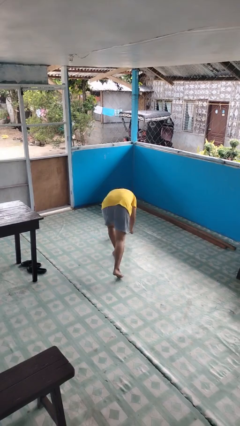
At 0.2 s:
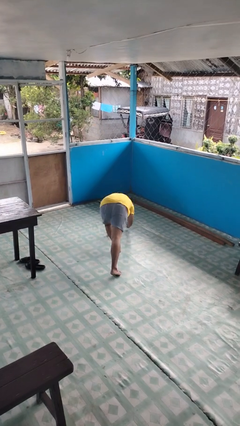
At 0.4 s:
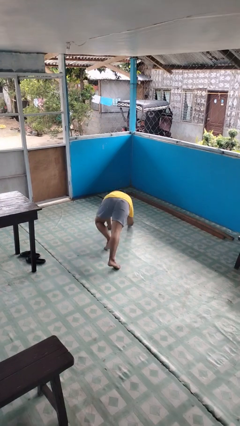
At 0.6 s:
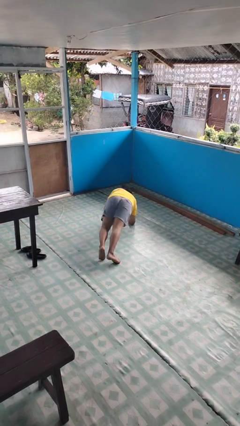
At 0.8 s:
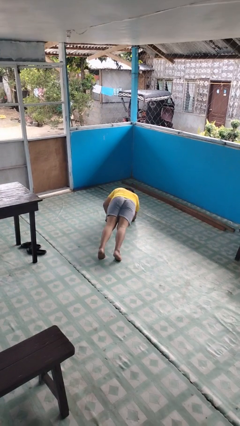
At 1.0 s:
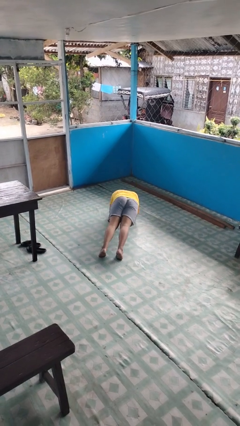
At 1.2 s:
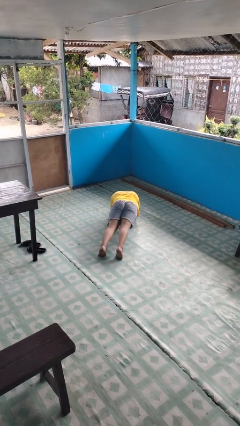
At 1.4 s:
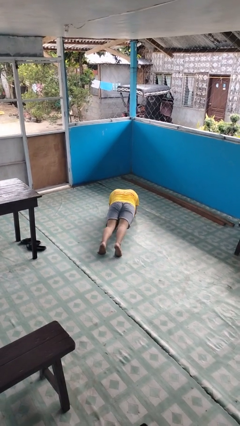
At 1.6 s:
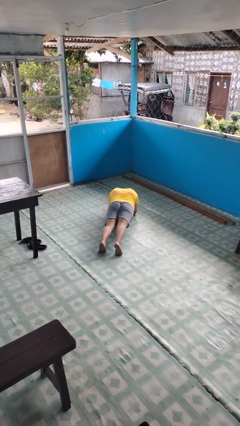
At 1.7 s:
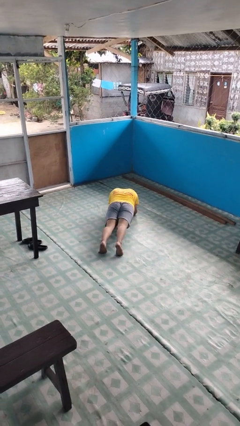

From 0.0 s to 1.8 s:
person exercises with plank

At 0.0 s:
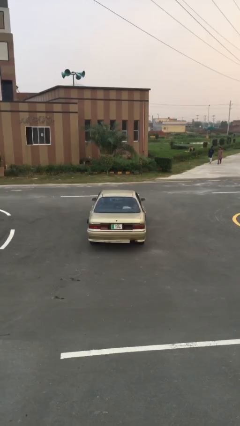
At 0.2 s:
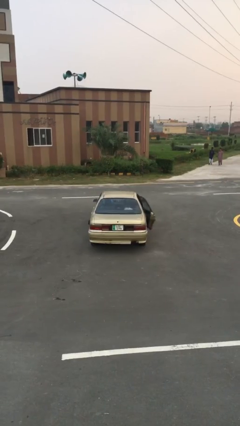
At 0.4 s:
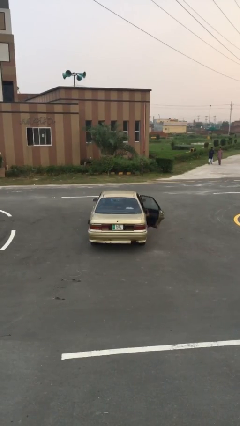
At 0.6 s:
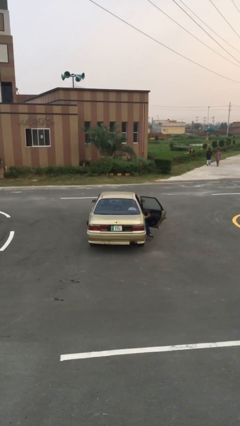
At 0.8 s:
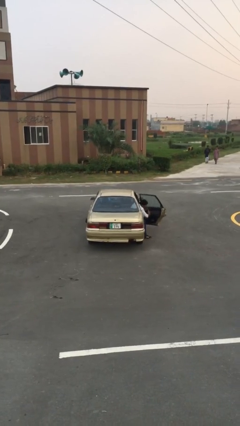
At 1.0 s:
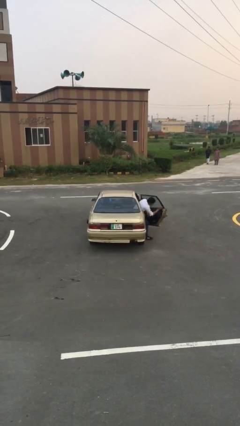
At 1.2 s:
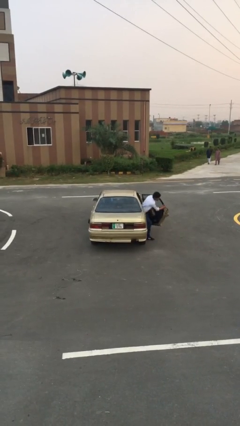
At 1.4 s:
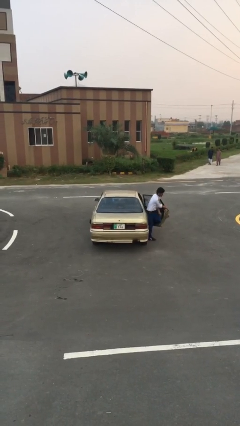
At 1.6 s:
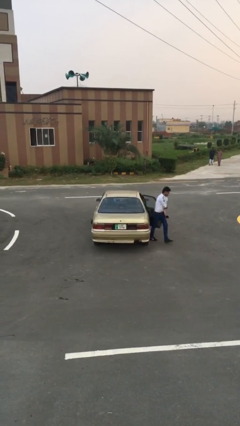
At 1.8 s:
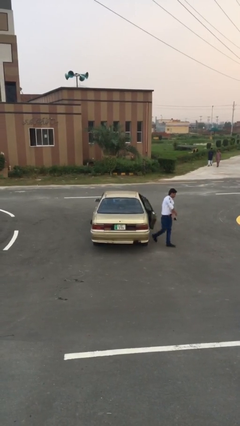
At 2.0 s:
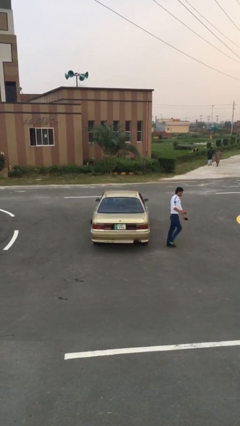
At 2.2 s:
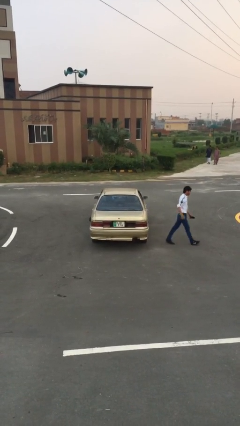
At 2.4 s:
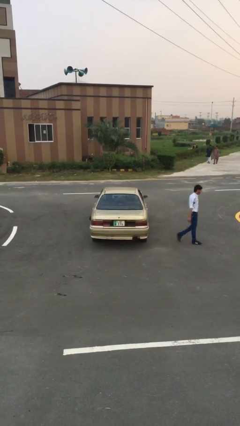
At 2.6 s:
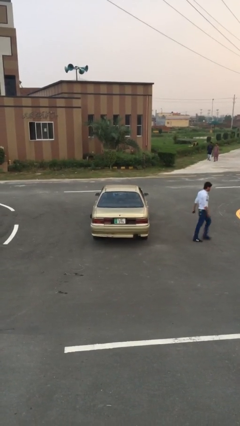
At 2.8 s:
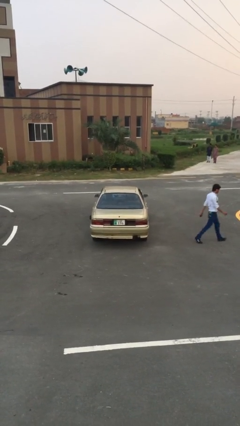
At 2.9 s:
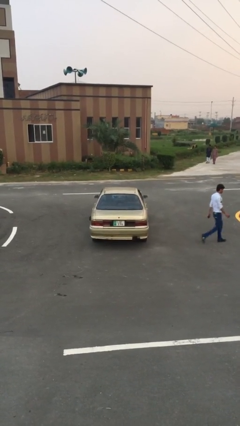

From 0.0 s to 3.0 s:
car drops off person

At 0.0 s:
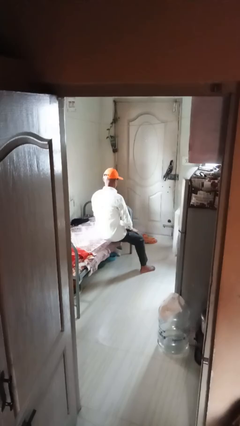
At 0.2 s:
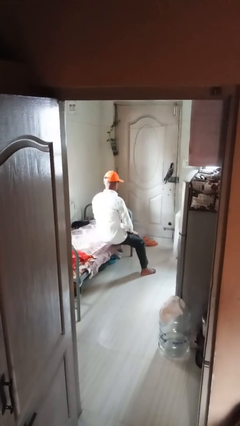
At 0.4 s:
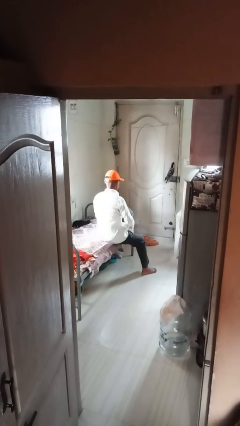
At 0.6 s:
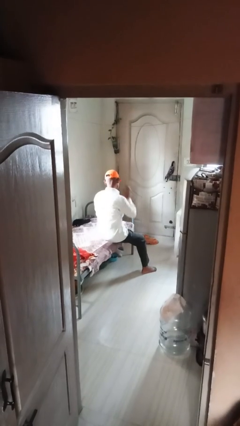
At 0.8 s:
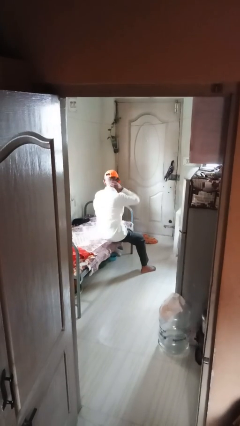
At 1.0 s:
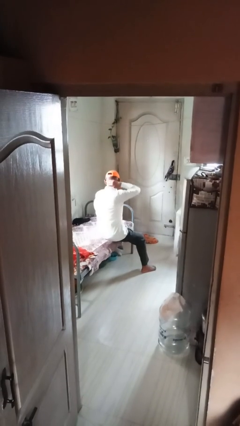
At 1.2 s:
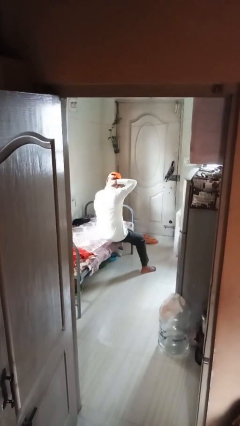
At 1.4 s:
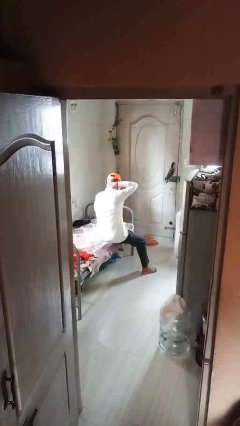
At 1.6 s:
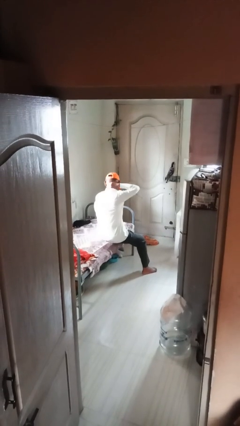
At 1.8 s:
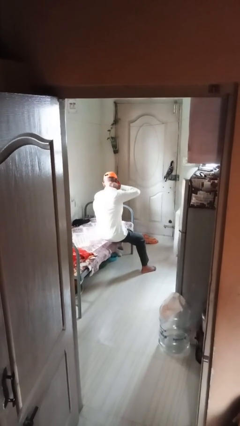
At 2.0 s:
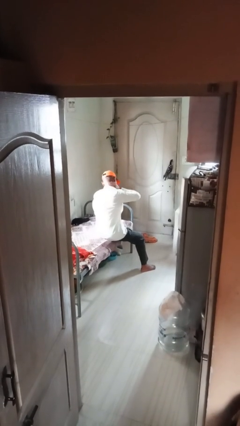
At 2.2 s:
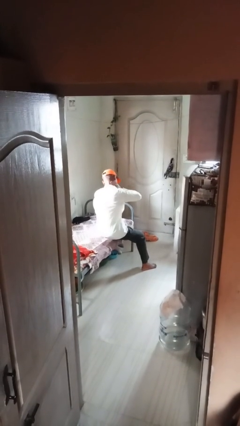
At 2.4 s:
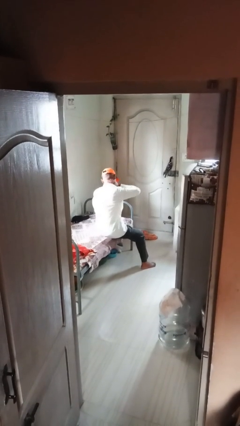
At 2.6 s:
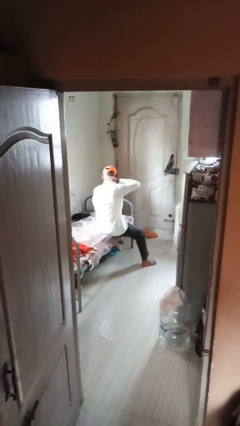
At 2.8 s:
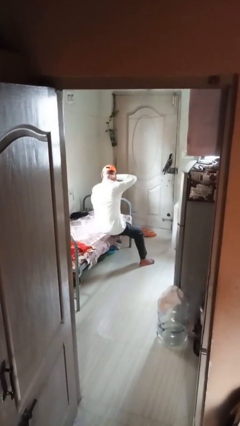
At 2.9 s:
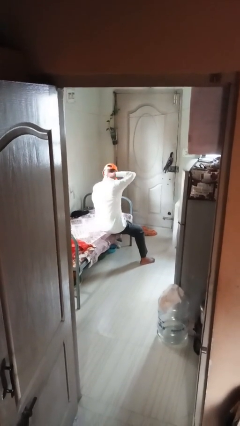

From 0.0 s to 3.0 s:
person rubs neck

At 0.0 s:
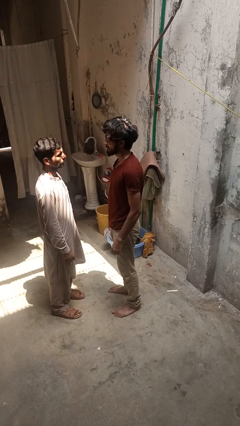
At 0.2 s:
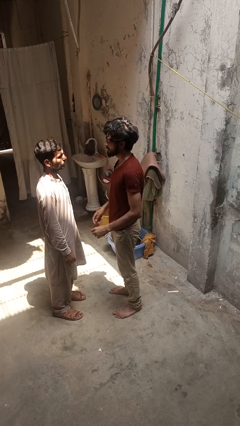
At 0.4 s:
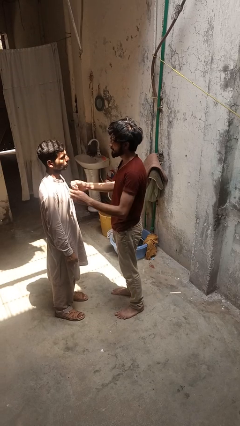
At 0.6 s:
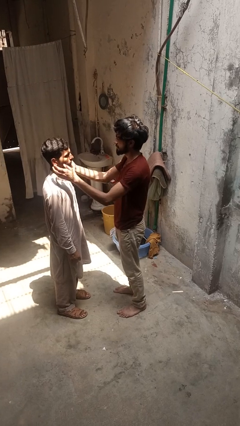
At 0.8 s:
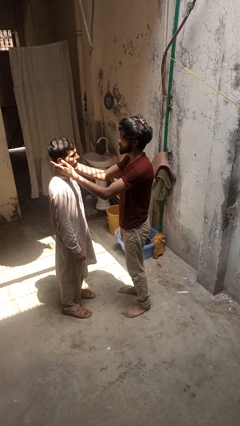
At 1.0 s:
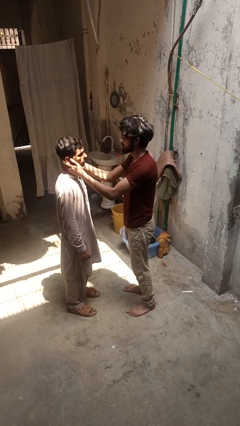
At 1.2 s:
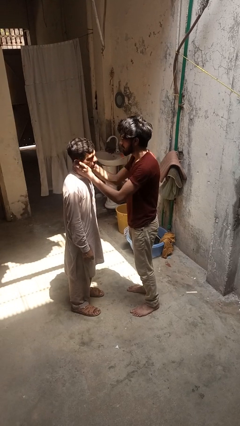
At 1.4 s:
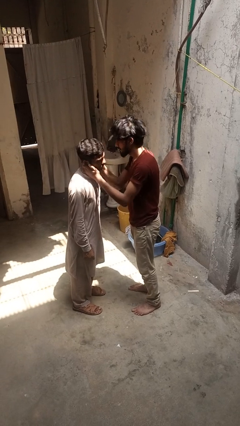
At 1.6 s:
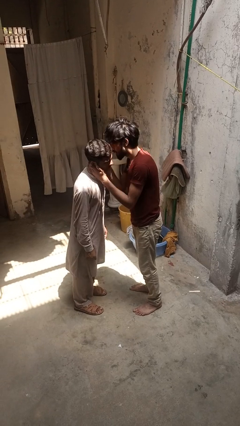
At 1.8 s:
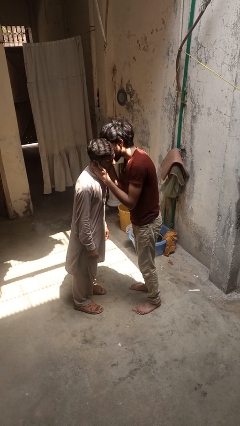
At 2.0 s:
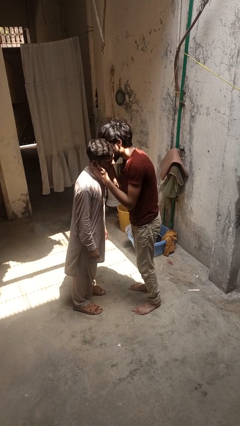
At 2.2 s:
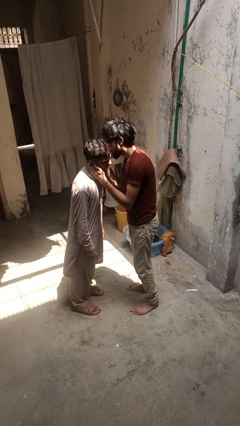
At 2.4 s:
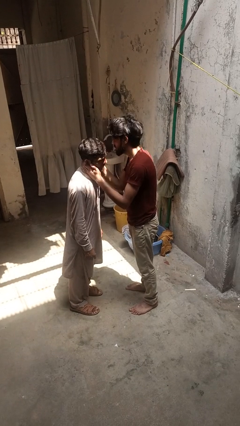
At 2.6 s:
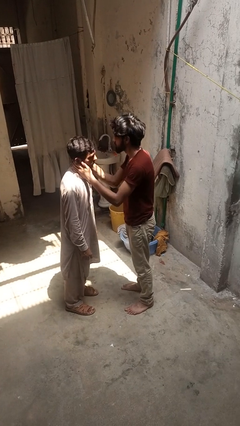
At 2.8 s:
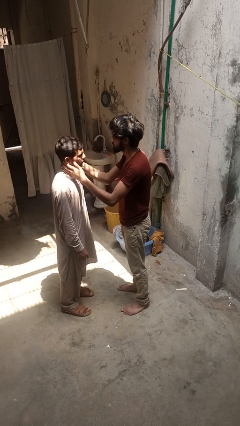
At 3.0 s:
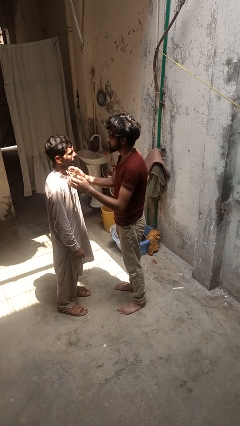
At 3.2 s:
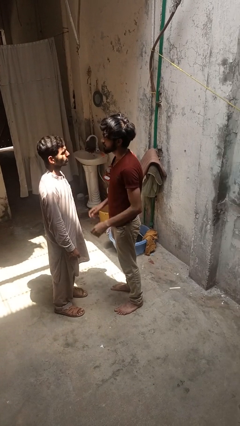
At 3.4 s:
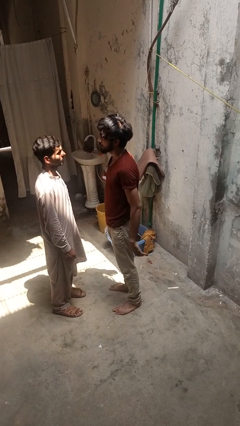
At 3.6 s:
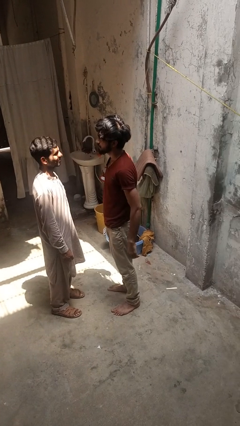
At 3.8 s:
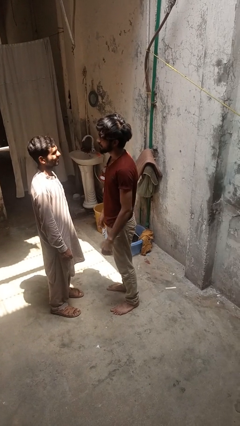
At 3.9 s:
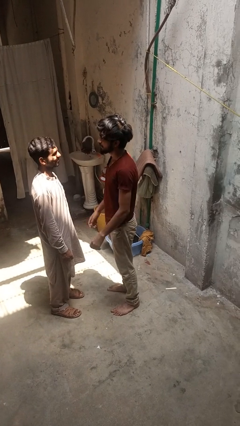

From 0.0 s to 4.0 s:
person kisses cheek of person

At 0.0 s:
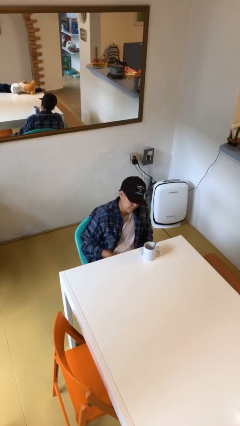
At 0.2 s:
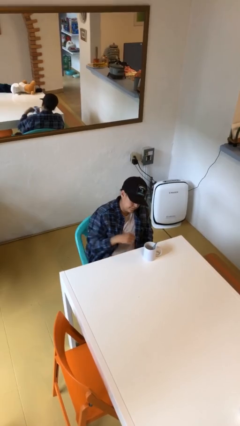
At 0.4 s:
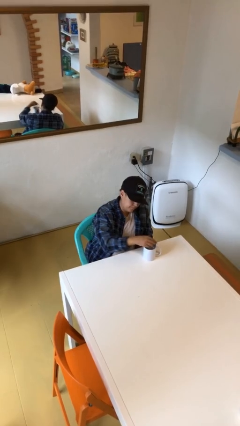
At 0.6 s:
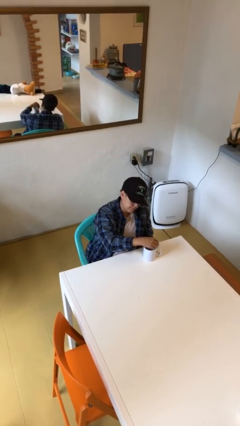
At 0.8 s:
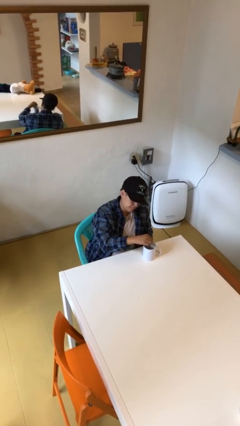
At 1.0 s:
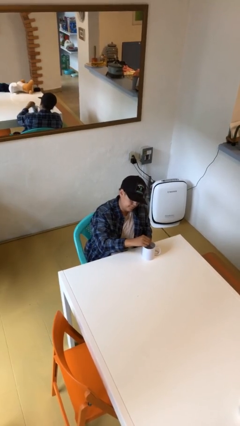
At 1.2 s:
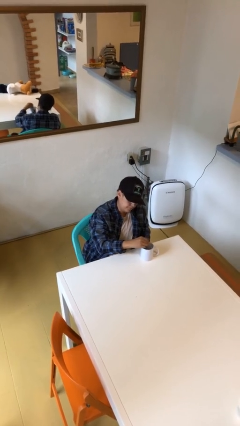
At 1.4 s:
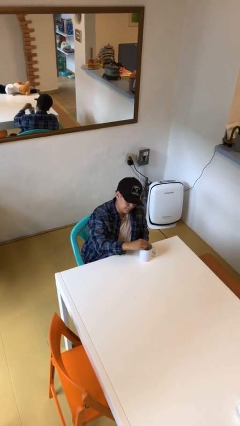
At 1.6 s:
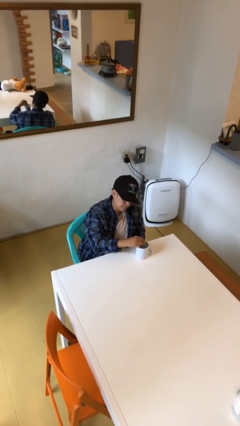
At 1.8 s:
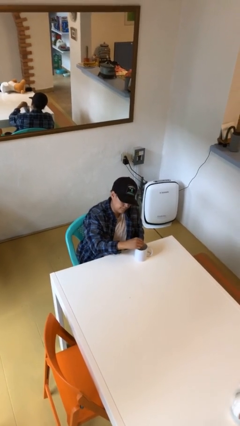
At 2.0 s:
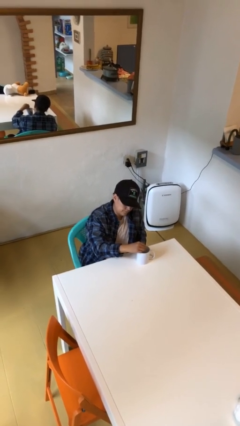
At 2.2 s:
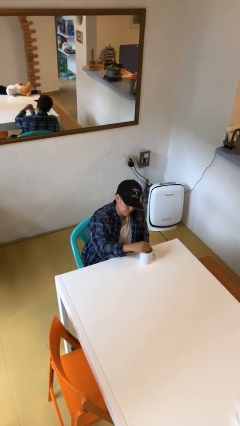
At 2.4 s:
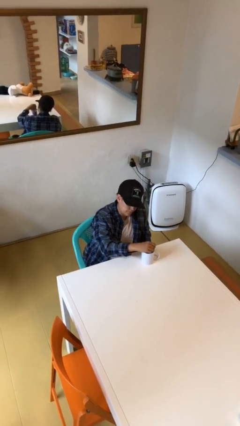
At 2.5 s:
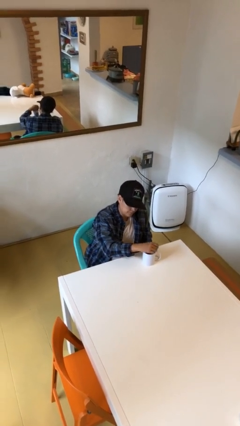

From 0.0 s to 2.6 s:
person stirs mug

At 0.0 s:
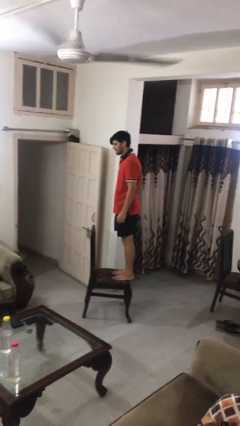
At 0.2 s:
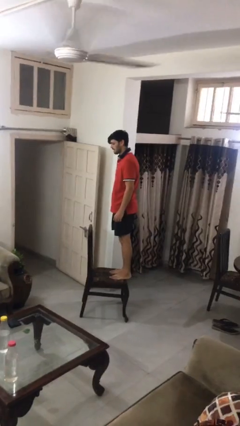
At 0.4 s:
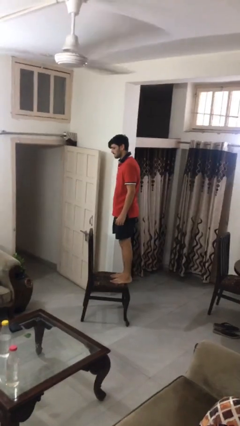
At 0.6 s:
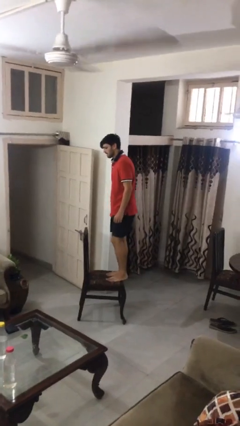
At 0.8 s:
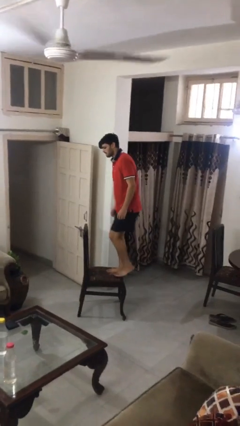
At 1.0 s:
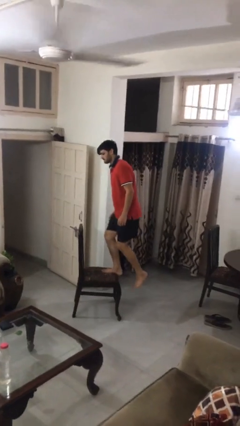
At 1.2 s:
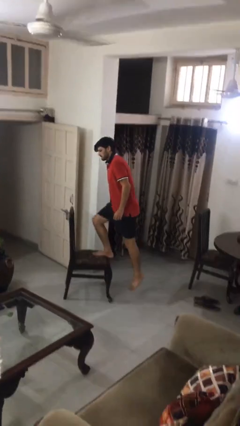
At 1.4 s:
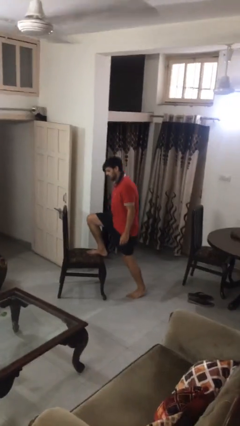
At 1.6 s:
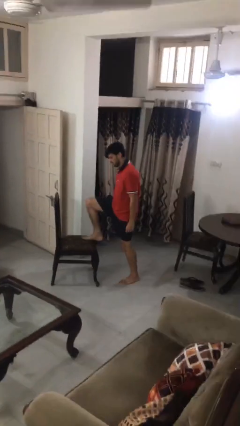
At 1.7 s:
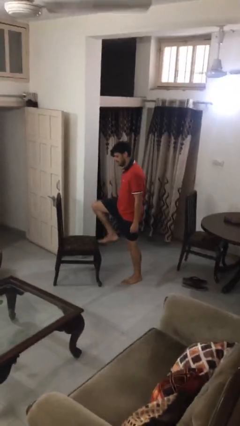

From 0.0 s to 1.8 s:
person climbs off chair

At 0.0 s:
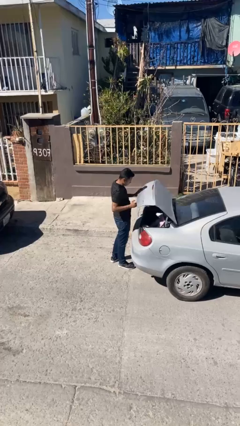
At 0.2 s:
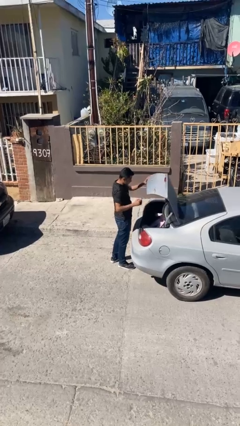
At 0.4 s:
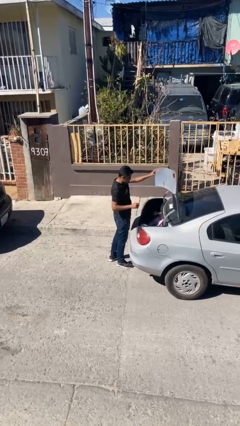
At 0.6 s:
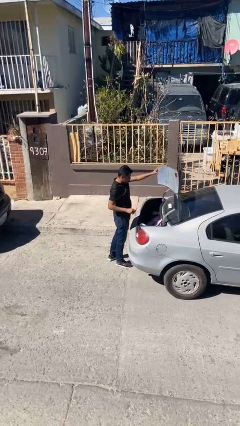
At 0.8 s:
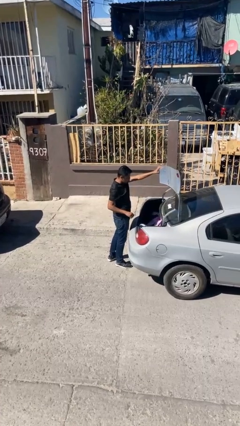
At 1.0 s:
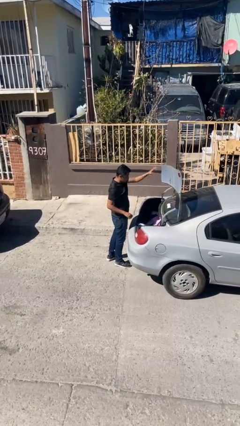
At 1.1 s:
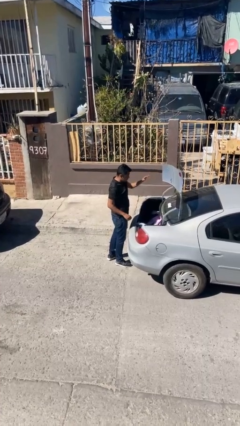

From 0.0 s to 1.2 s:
person opens car trunk
